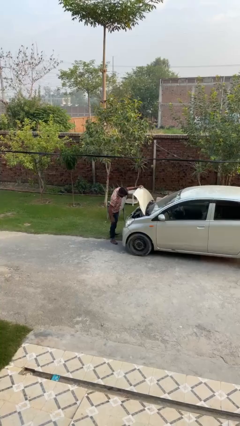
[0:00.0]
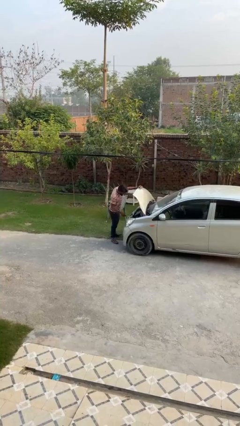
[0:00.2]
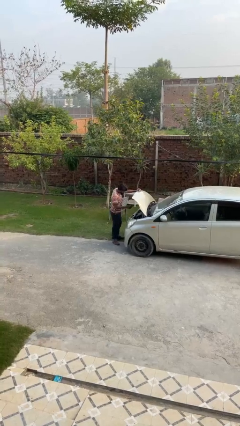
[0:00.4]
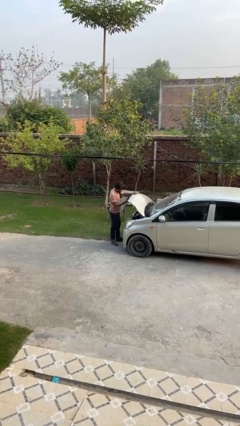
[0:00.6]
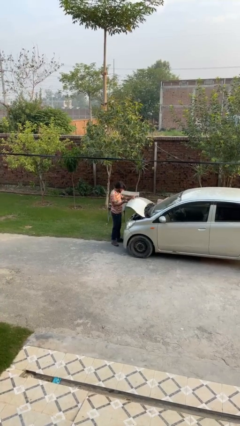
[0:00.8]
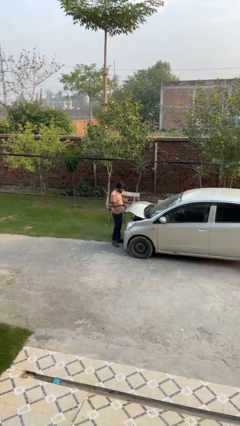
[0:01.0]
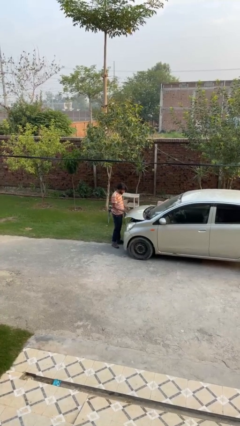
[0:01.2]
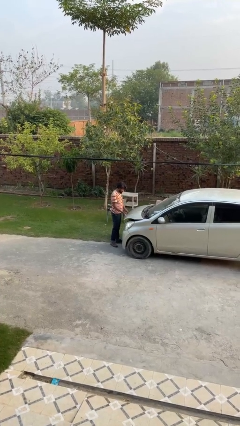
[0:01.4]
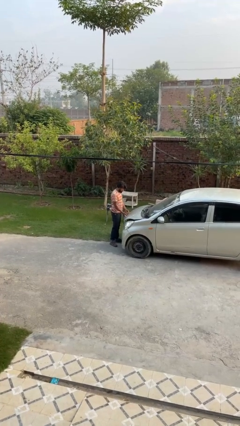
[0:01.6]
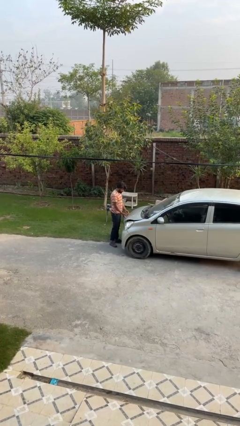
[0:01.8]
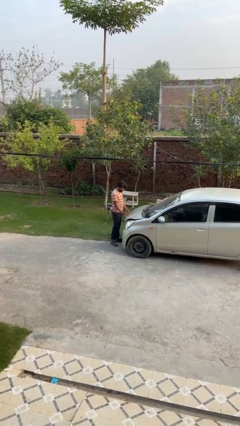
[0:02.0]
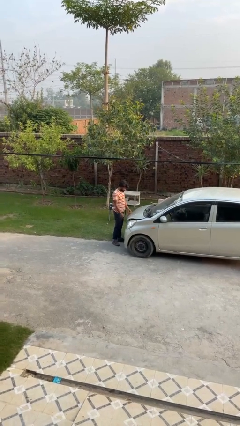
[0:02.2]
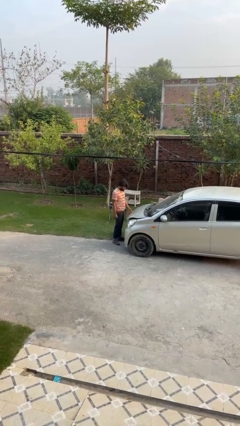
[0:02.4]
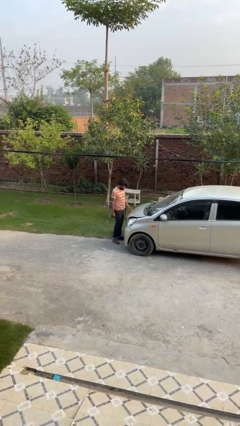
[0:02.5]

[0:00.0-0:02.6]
person closes car hood

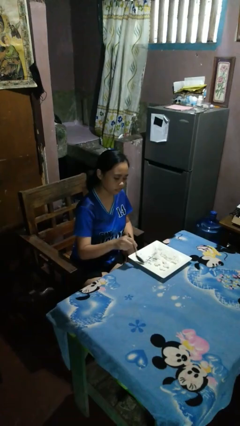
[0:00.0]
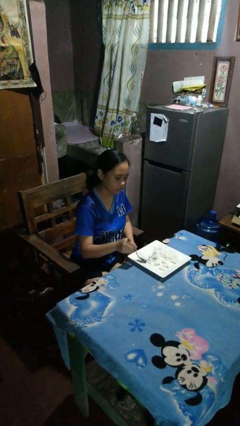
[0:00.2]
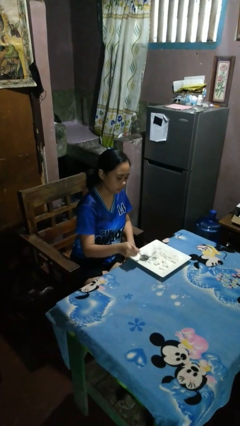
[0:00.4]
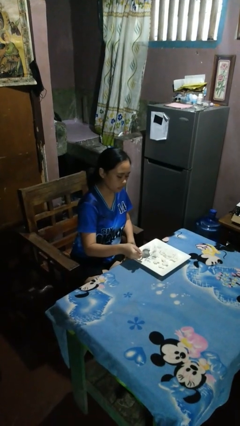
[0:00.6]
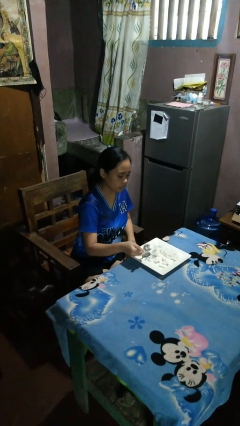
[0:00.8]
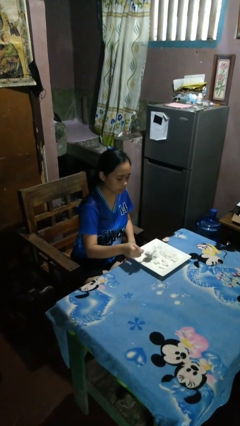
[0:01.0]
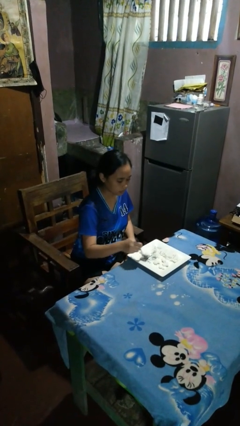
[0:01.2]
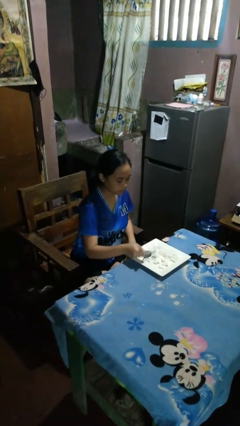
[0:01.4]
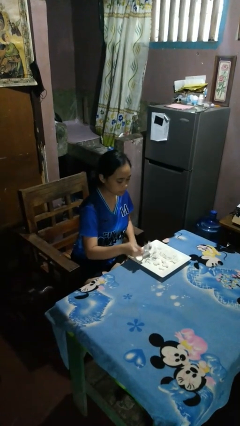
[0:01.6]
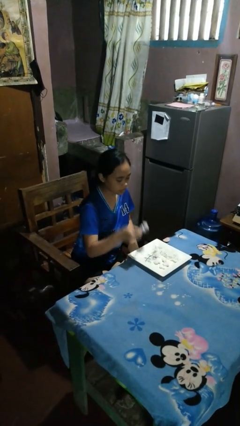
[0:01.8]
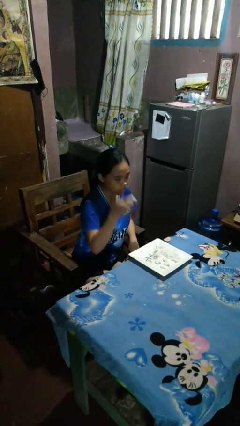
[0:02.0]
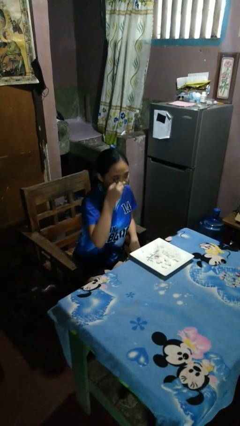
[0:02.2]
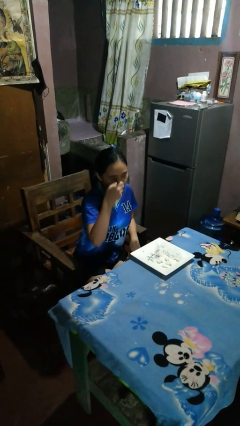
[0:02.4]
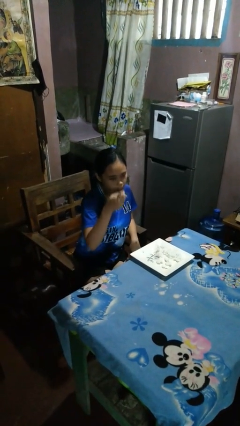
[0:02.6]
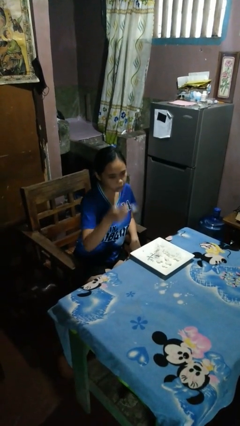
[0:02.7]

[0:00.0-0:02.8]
person eats with utensil

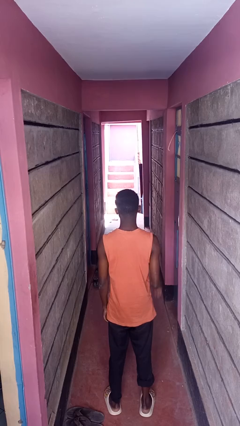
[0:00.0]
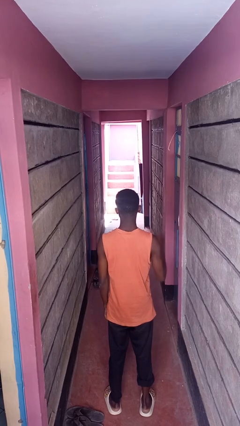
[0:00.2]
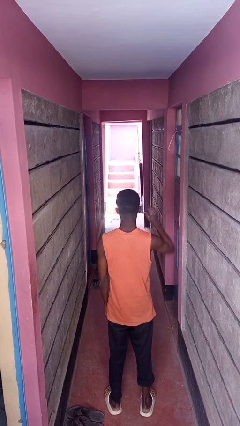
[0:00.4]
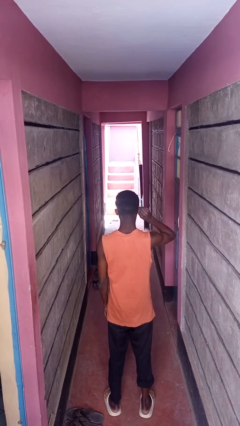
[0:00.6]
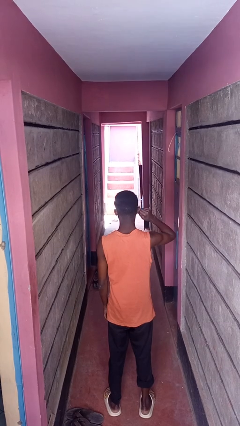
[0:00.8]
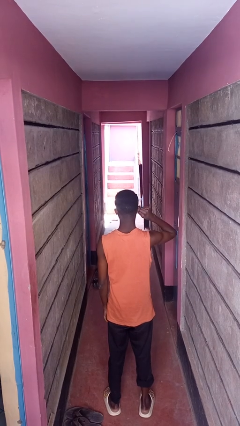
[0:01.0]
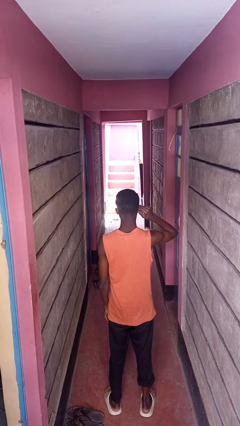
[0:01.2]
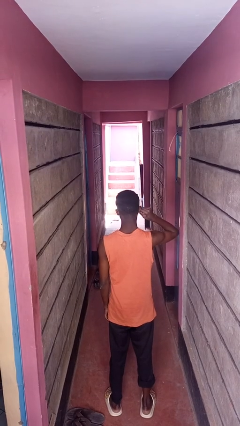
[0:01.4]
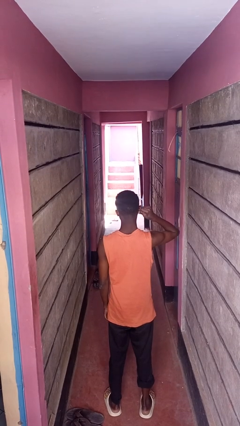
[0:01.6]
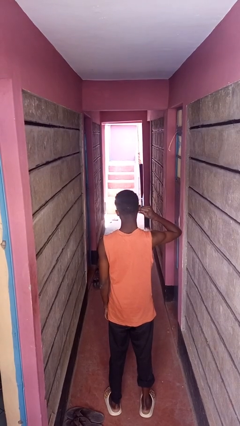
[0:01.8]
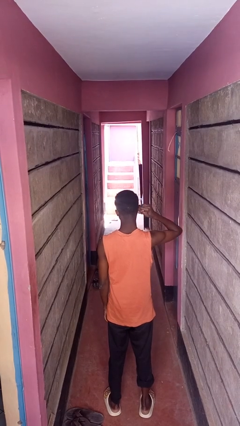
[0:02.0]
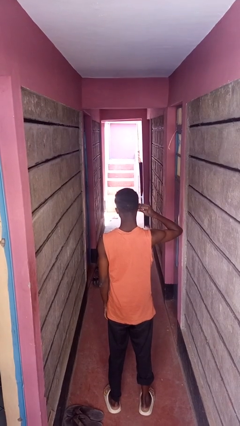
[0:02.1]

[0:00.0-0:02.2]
person touches earlobe

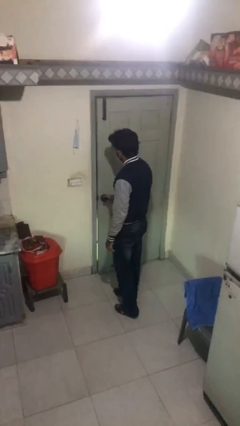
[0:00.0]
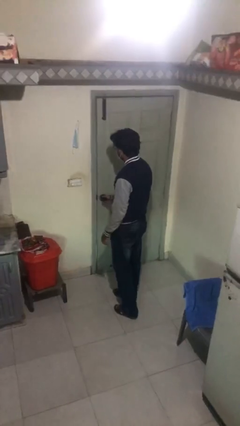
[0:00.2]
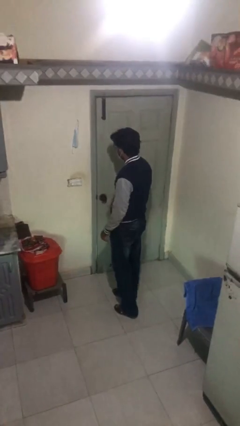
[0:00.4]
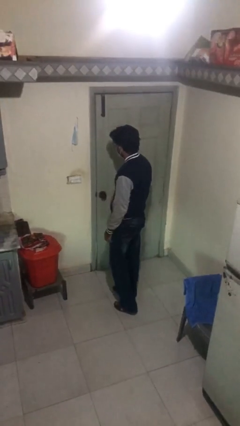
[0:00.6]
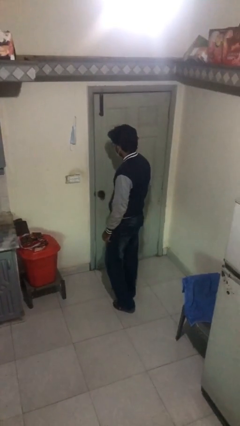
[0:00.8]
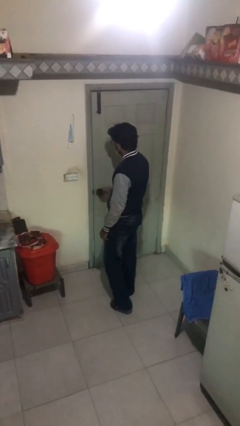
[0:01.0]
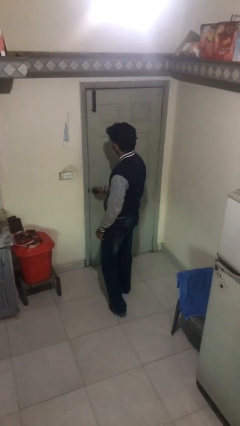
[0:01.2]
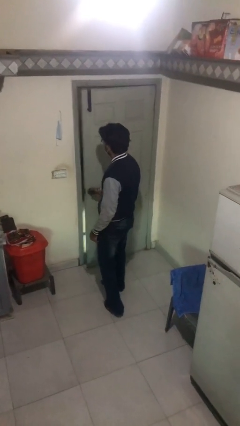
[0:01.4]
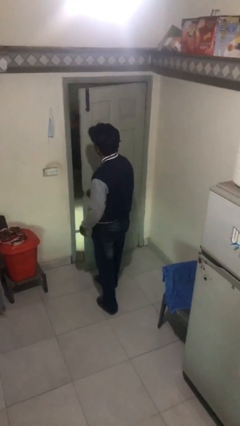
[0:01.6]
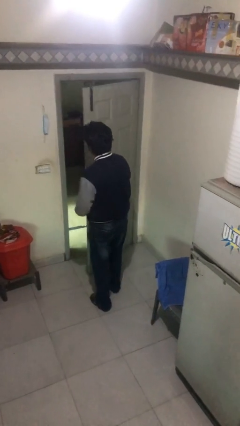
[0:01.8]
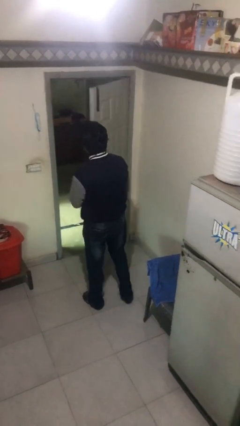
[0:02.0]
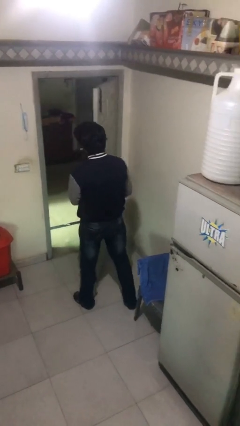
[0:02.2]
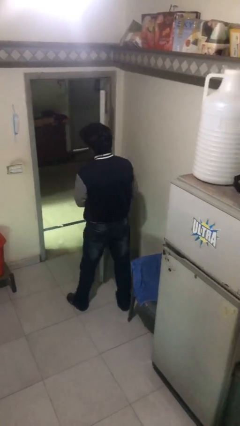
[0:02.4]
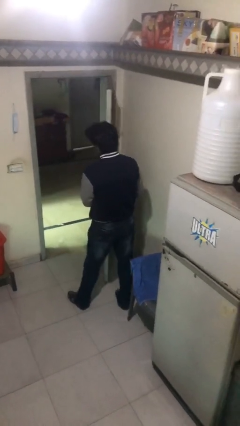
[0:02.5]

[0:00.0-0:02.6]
person opens facility door

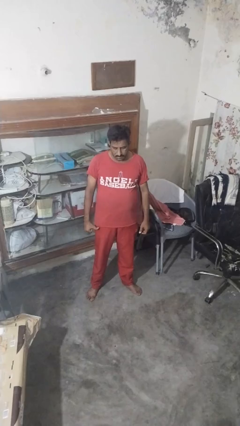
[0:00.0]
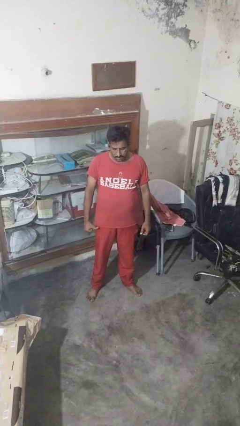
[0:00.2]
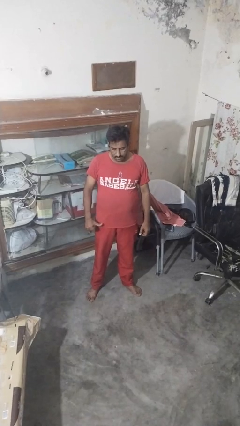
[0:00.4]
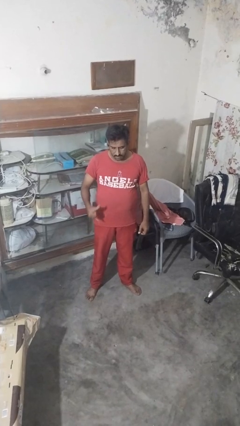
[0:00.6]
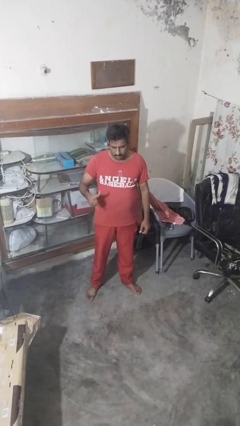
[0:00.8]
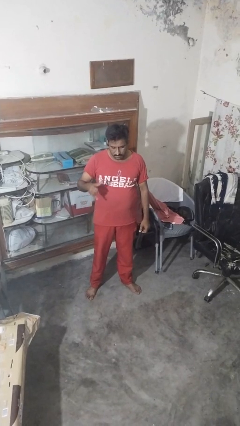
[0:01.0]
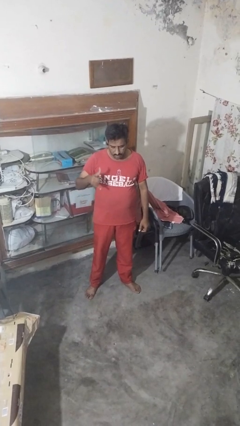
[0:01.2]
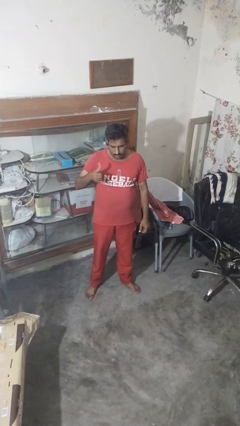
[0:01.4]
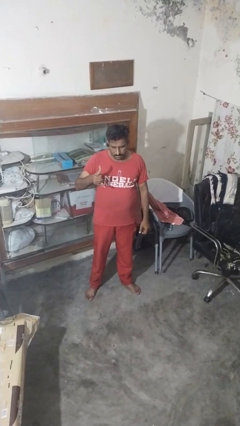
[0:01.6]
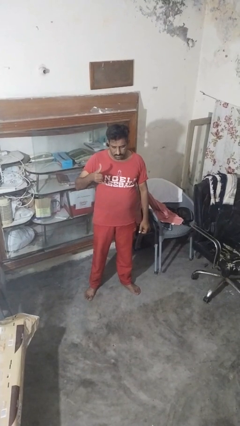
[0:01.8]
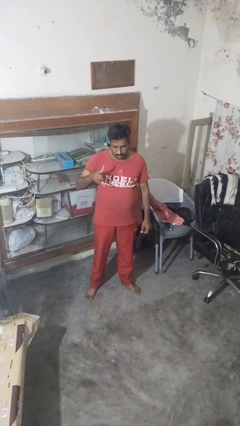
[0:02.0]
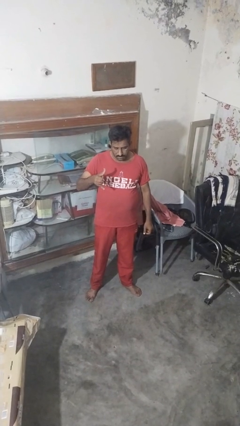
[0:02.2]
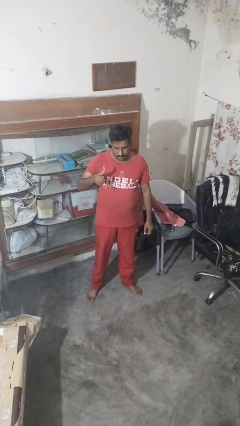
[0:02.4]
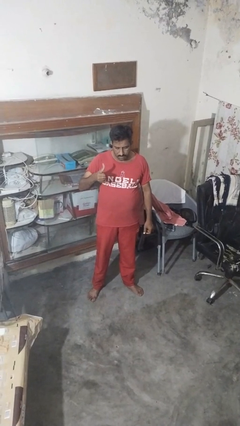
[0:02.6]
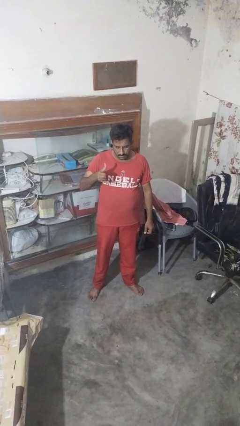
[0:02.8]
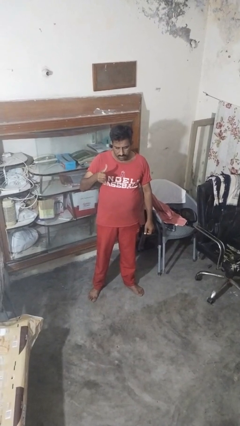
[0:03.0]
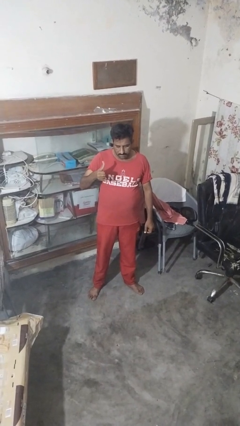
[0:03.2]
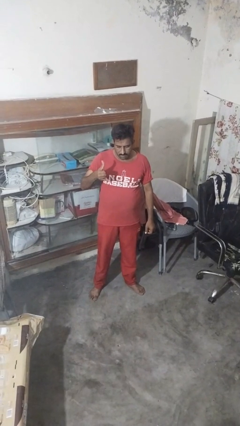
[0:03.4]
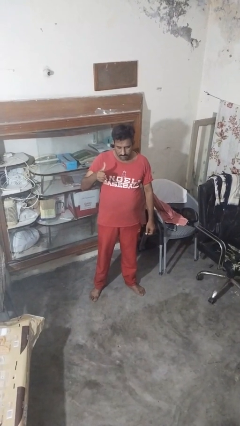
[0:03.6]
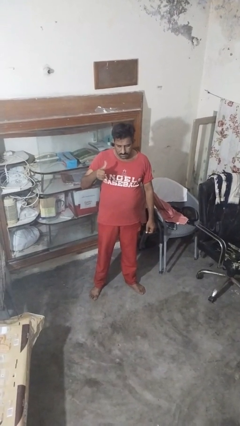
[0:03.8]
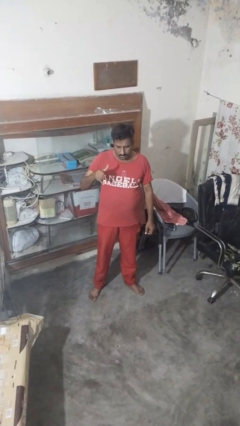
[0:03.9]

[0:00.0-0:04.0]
person gestures hang loose

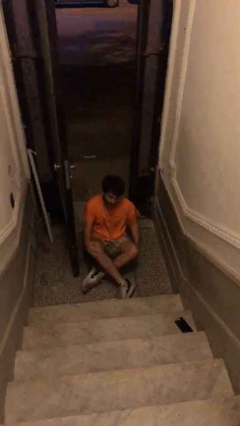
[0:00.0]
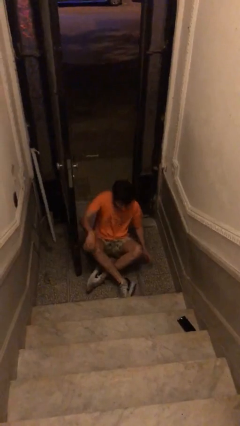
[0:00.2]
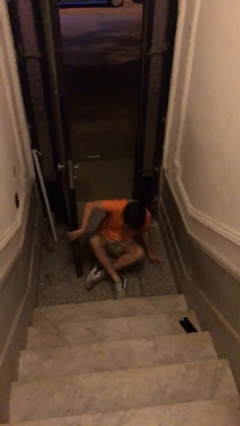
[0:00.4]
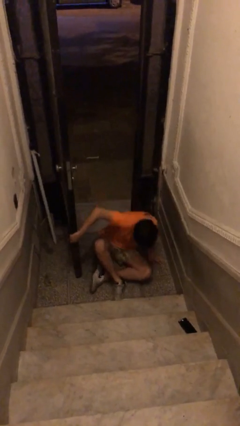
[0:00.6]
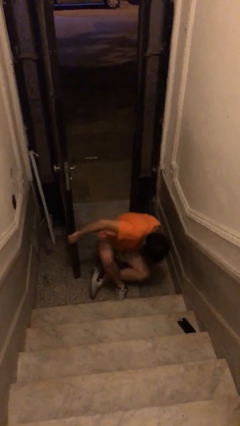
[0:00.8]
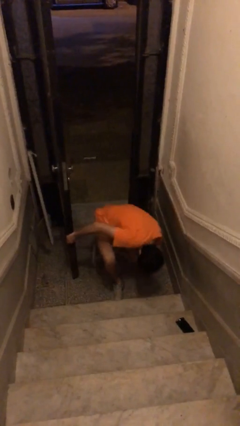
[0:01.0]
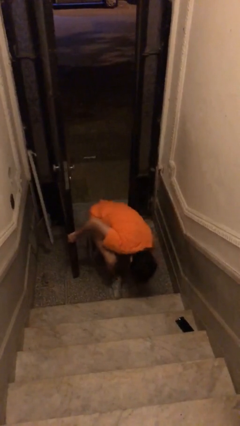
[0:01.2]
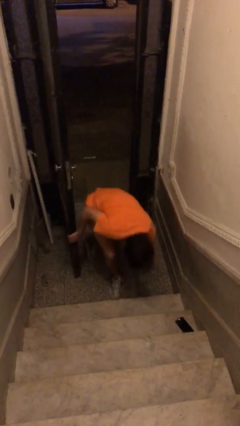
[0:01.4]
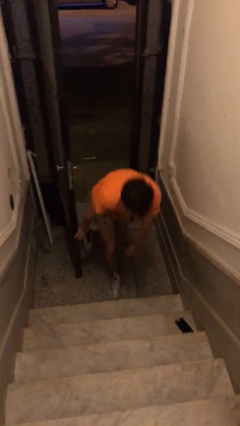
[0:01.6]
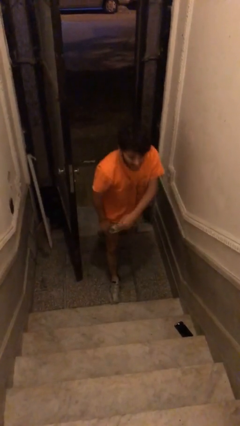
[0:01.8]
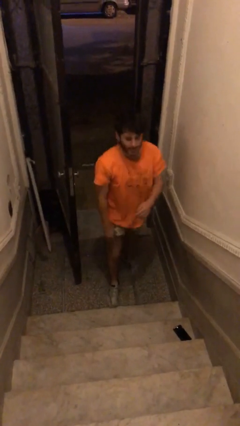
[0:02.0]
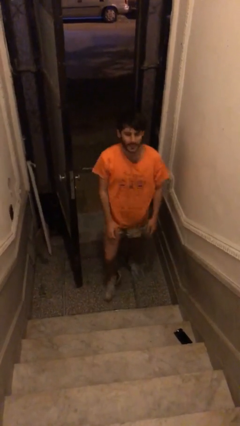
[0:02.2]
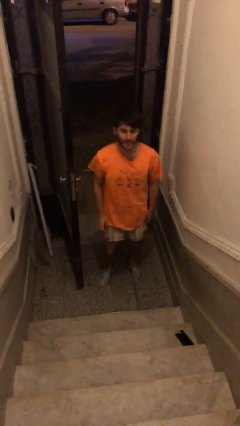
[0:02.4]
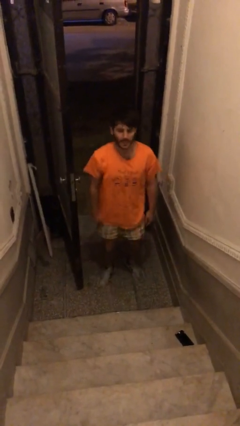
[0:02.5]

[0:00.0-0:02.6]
person stands up

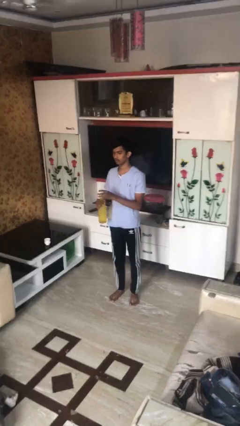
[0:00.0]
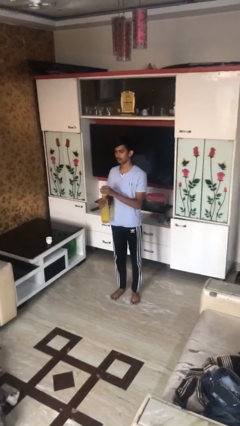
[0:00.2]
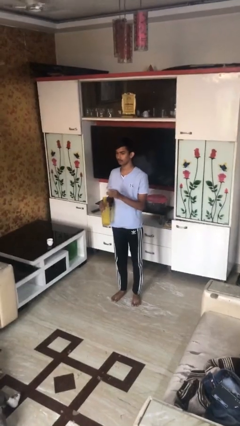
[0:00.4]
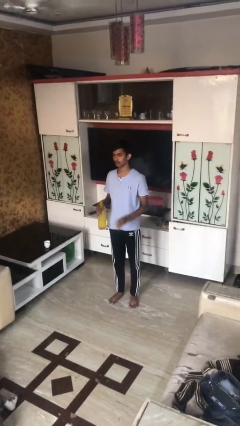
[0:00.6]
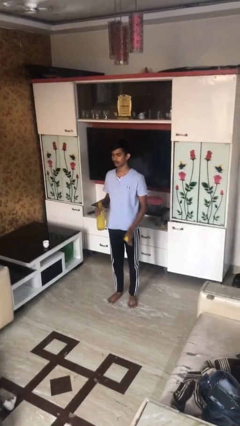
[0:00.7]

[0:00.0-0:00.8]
person unscrews lid from bottle
